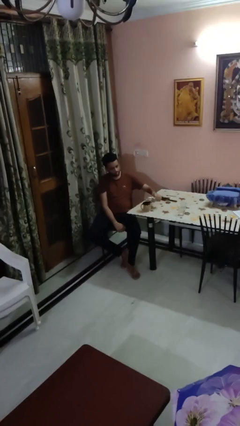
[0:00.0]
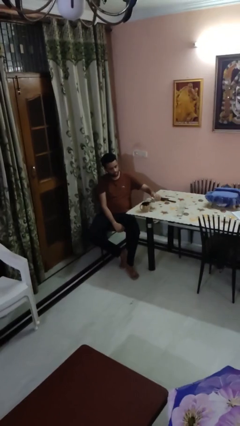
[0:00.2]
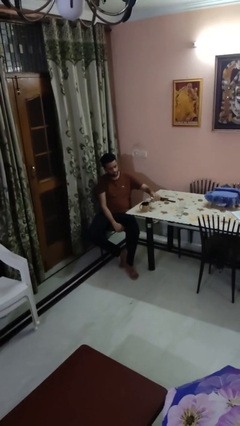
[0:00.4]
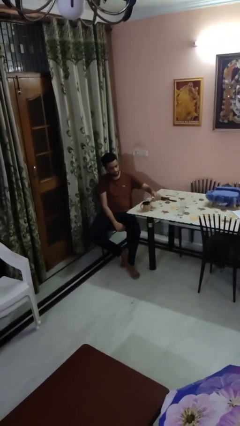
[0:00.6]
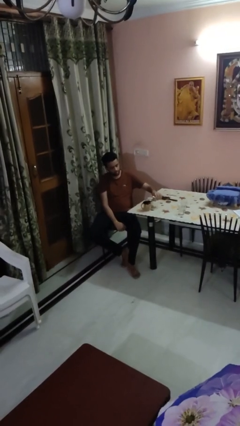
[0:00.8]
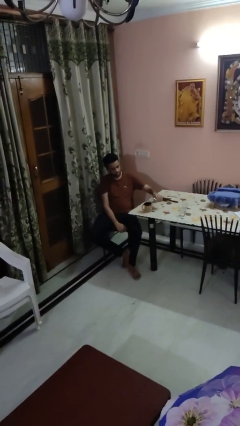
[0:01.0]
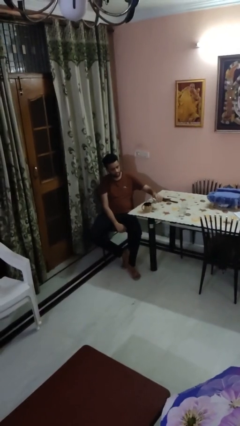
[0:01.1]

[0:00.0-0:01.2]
person pours liquid into cup

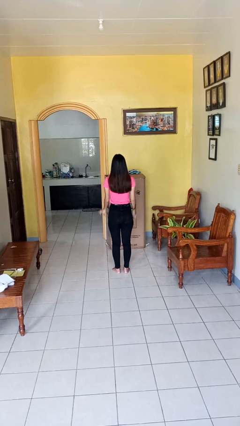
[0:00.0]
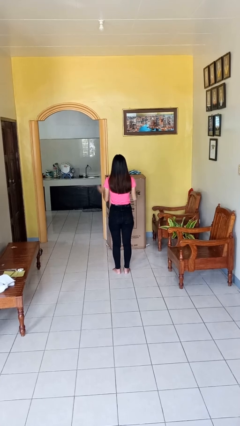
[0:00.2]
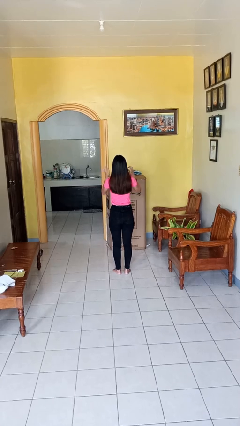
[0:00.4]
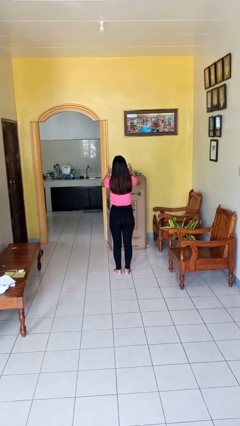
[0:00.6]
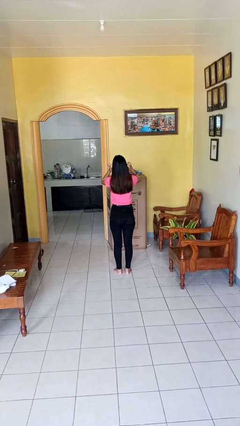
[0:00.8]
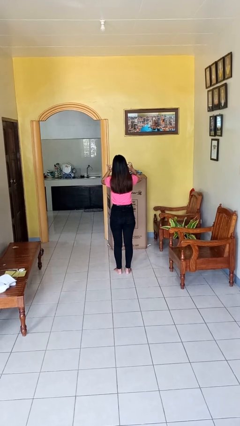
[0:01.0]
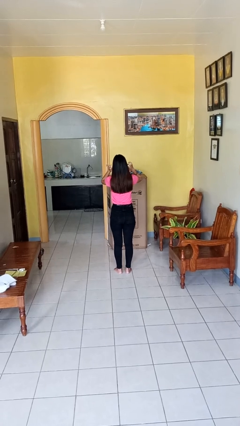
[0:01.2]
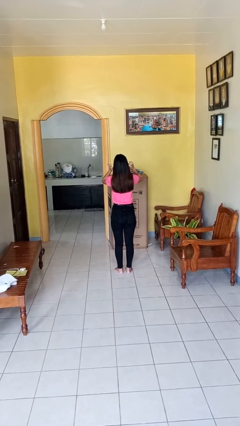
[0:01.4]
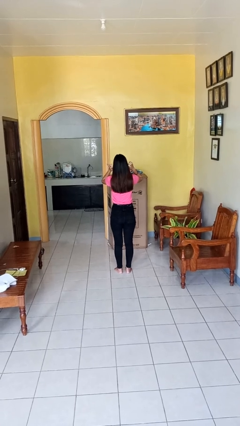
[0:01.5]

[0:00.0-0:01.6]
person puts fingers in ear

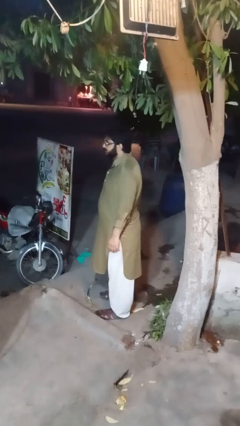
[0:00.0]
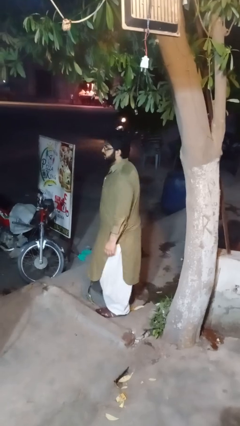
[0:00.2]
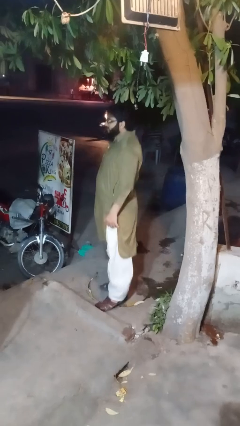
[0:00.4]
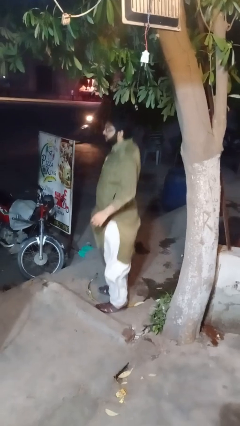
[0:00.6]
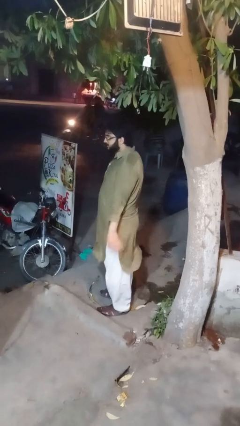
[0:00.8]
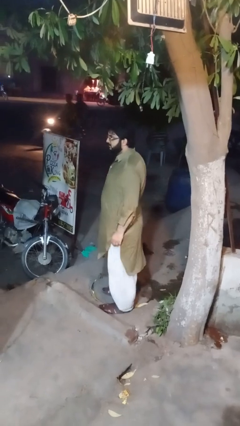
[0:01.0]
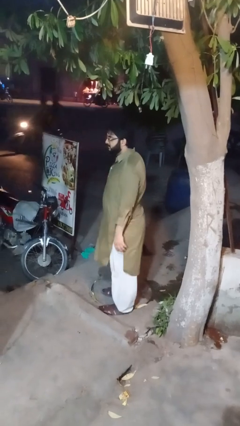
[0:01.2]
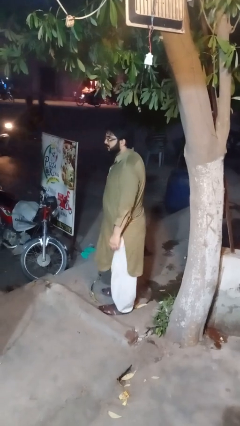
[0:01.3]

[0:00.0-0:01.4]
person jumps

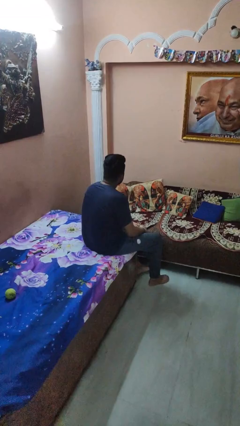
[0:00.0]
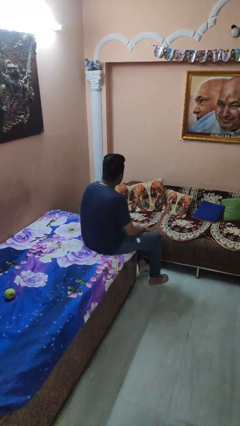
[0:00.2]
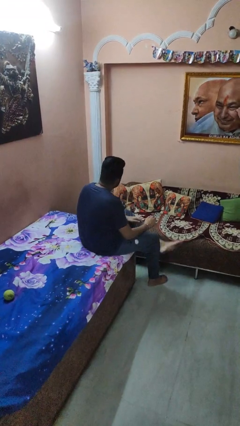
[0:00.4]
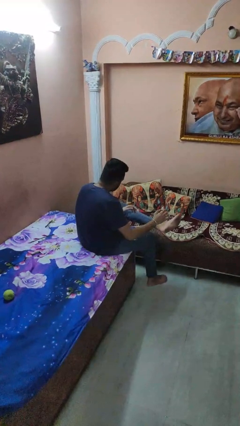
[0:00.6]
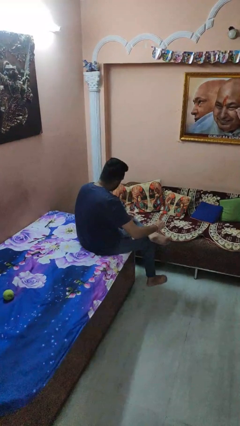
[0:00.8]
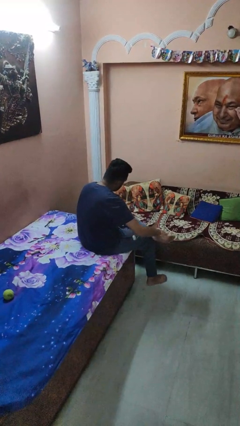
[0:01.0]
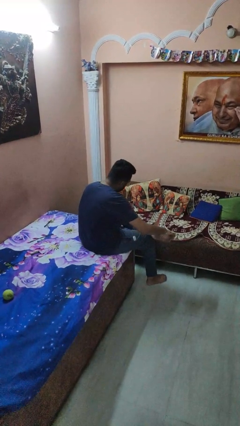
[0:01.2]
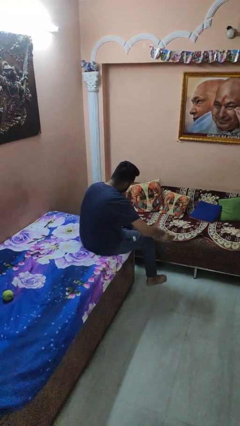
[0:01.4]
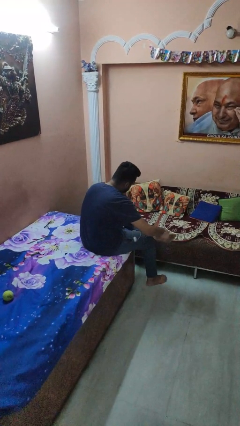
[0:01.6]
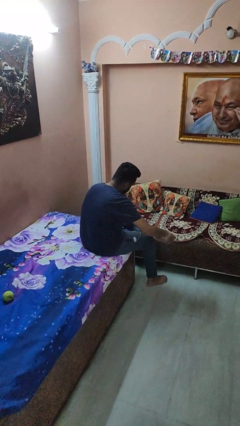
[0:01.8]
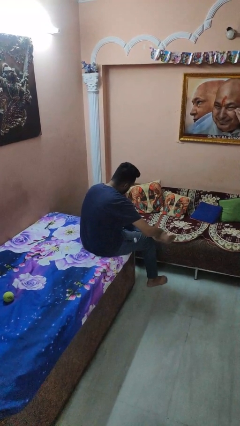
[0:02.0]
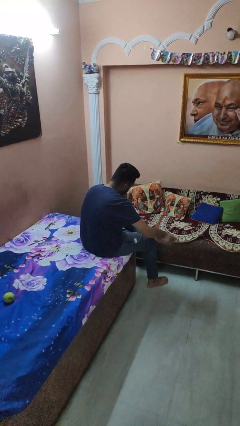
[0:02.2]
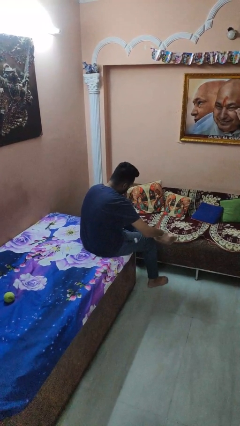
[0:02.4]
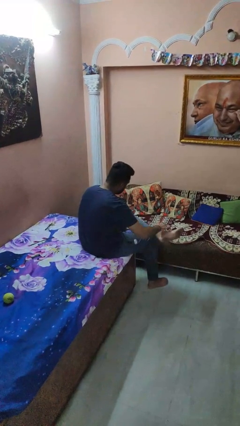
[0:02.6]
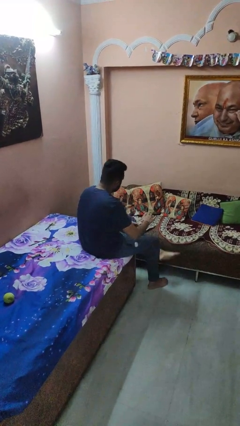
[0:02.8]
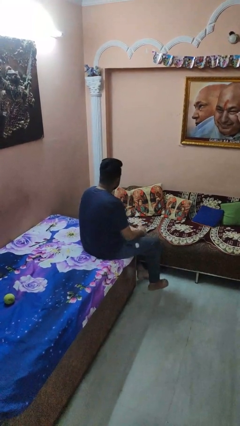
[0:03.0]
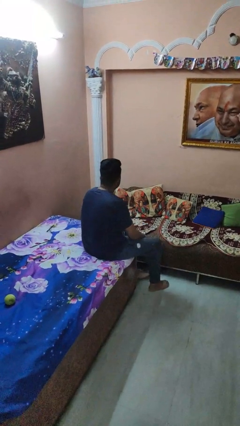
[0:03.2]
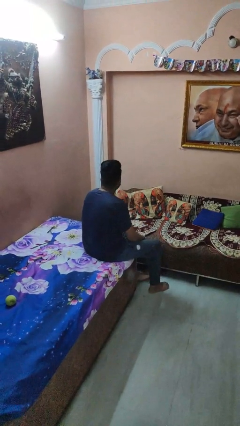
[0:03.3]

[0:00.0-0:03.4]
person rubs foot

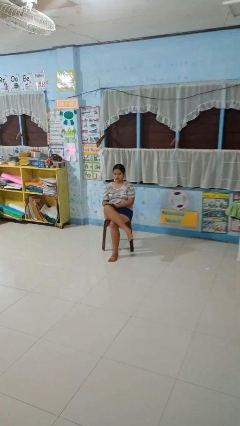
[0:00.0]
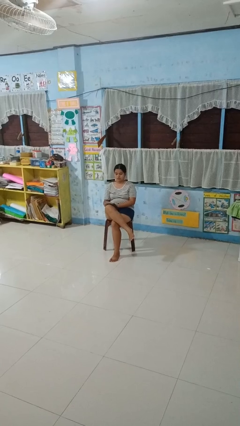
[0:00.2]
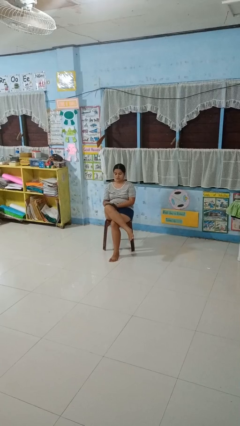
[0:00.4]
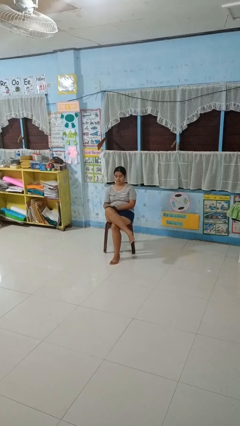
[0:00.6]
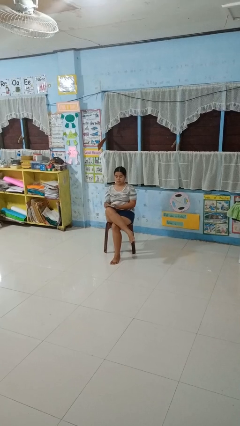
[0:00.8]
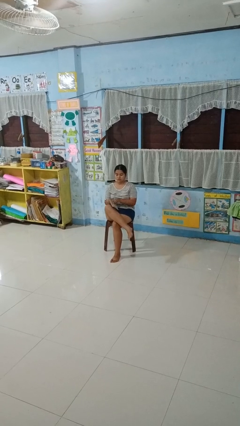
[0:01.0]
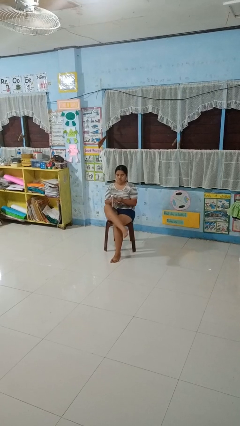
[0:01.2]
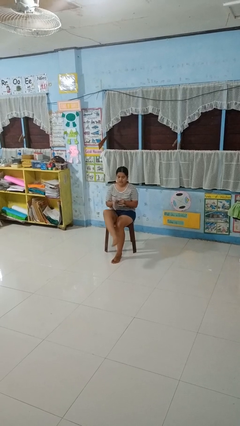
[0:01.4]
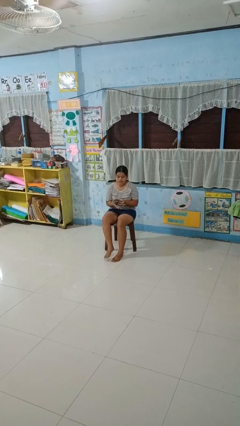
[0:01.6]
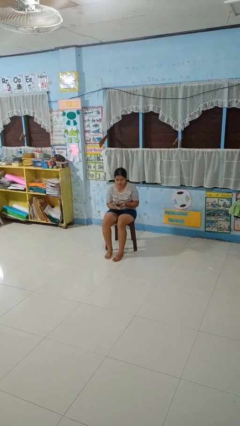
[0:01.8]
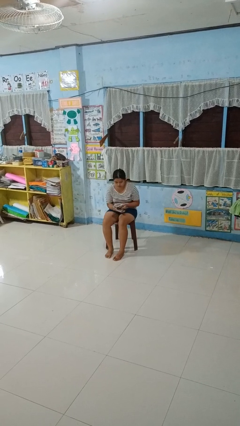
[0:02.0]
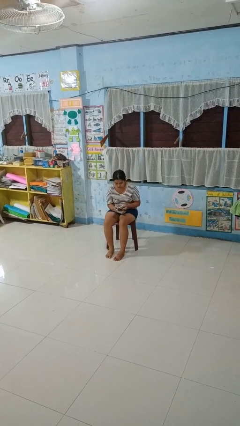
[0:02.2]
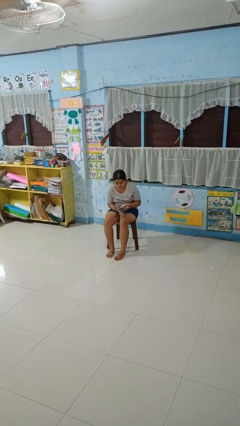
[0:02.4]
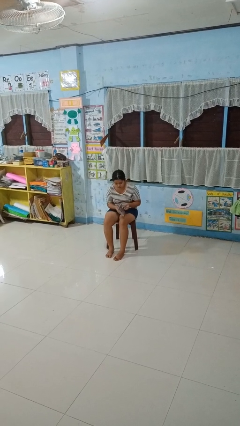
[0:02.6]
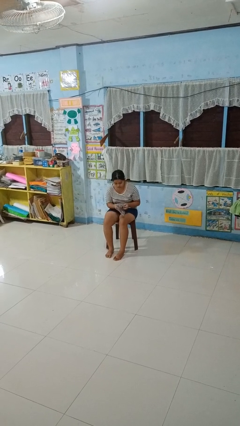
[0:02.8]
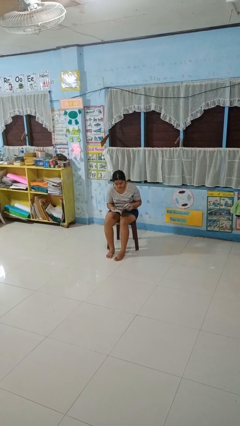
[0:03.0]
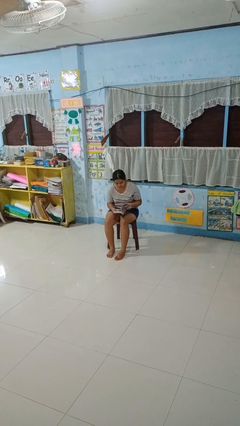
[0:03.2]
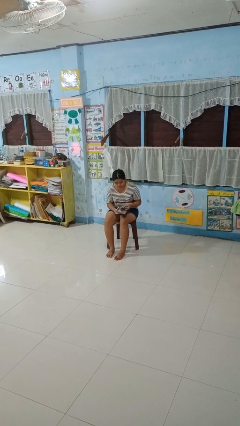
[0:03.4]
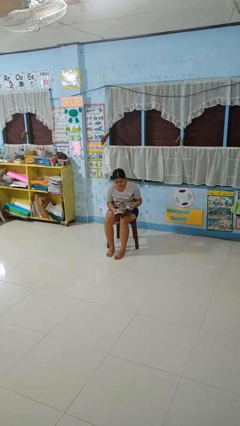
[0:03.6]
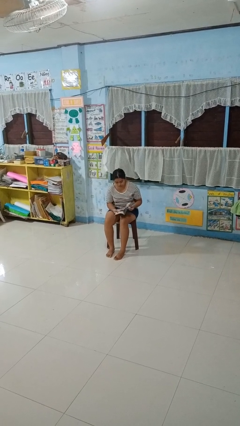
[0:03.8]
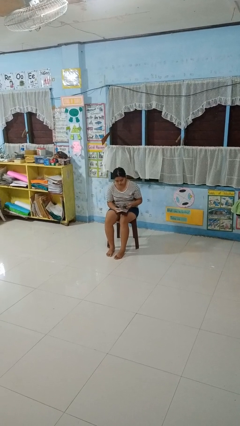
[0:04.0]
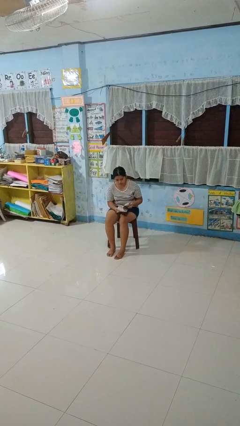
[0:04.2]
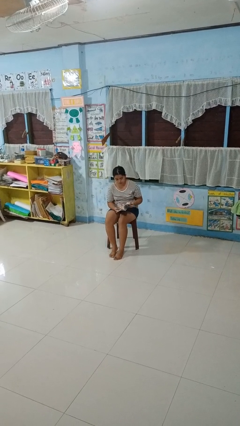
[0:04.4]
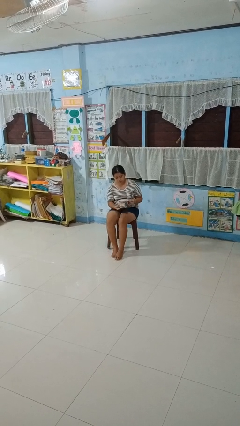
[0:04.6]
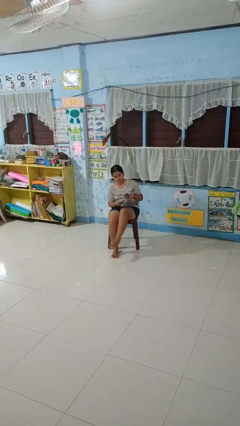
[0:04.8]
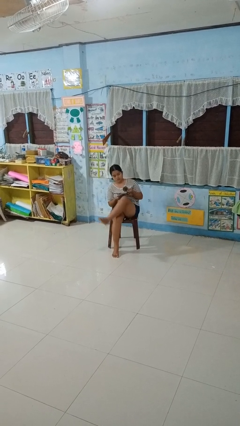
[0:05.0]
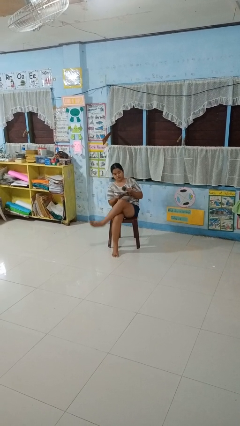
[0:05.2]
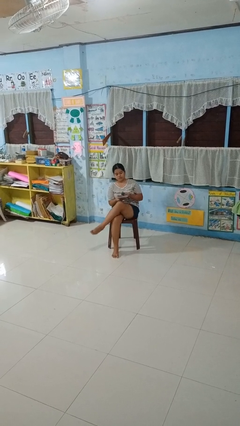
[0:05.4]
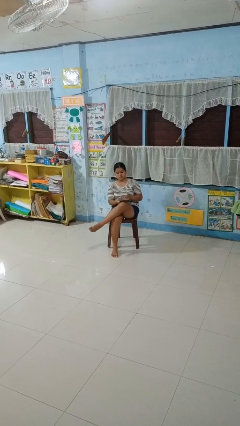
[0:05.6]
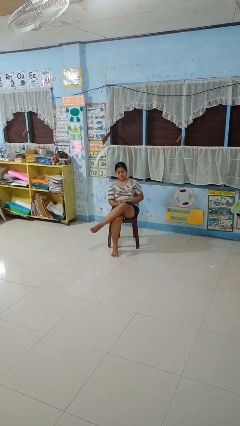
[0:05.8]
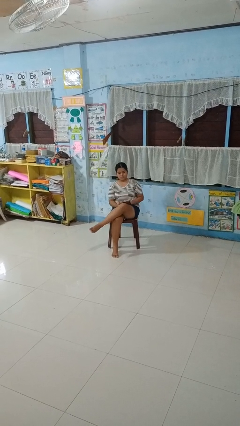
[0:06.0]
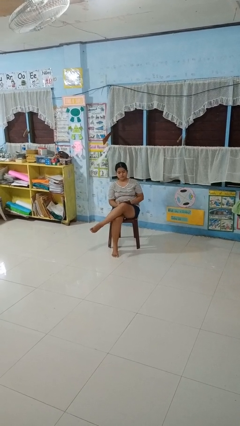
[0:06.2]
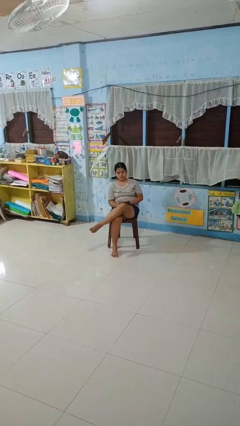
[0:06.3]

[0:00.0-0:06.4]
person reads magazine

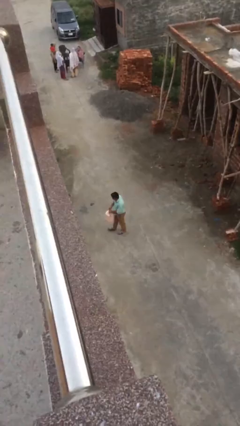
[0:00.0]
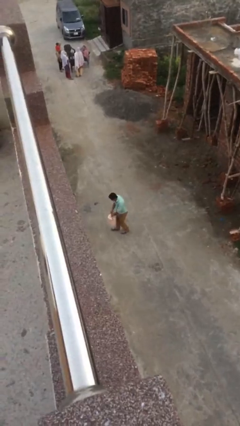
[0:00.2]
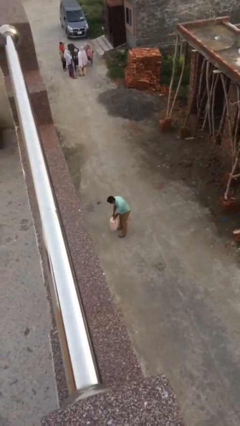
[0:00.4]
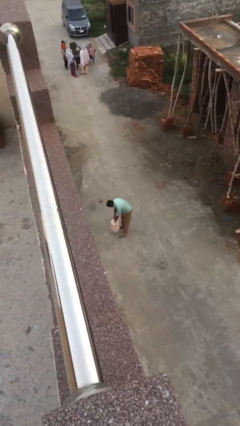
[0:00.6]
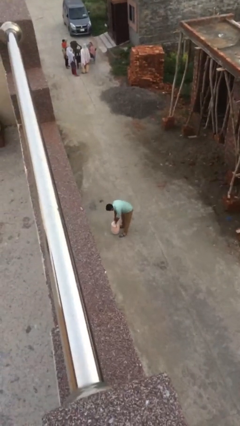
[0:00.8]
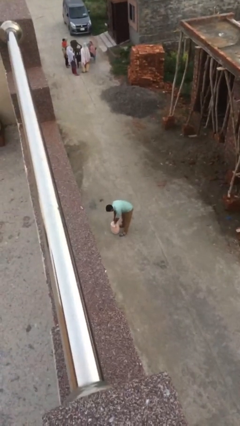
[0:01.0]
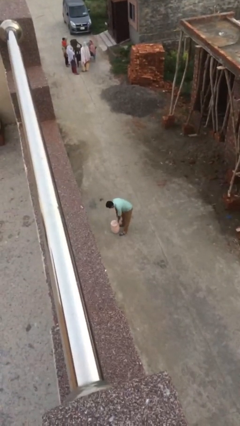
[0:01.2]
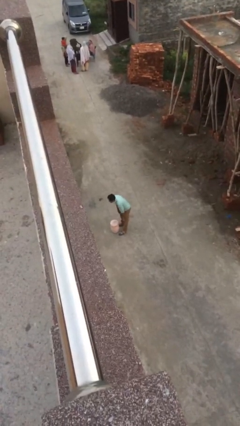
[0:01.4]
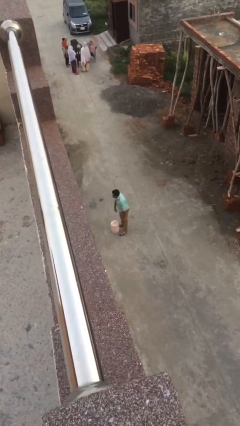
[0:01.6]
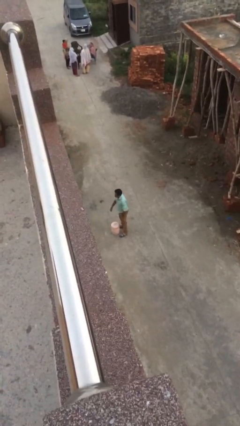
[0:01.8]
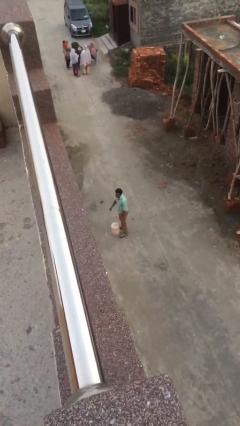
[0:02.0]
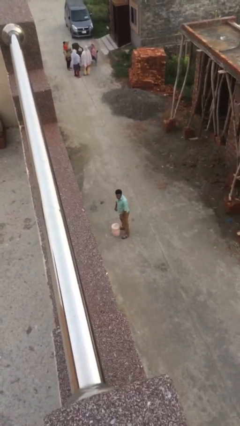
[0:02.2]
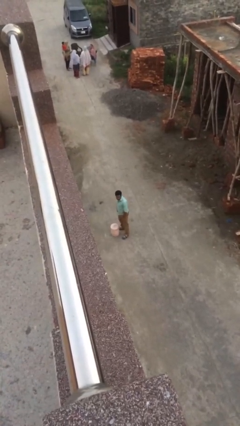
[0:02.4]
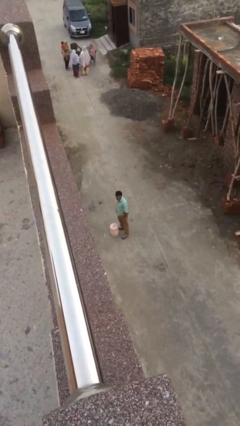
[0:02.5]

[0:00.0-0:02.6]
person puts down object on floor

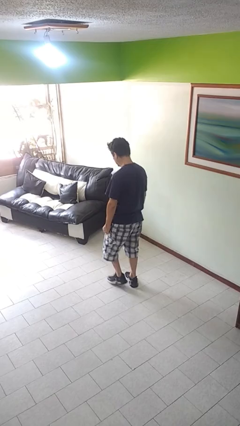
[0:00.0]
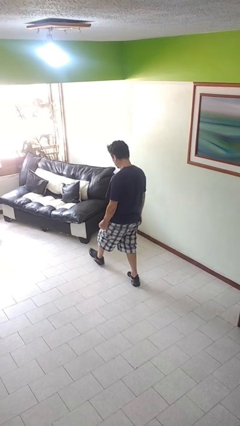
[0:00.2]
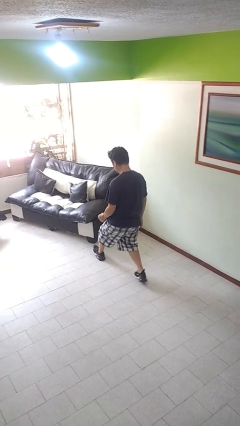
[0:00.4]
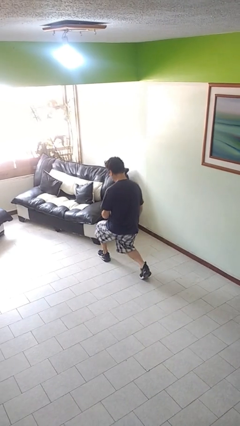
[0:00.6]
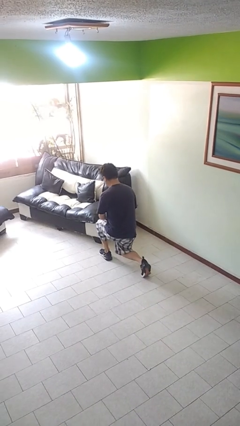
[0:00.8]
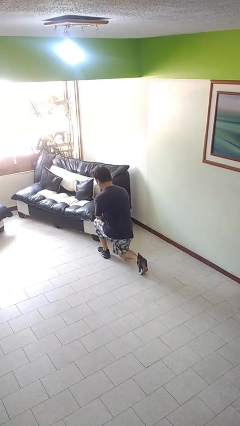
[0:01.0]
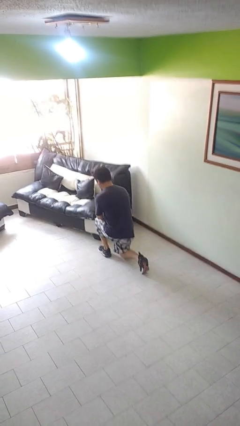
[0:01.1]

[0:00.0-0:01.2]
person kneels
